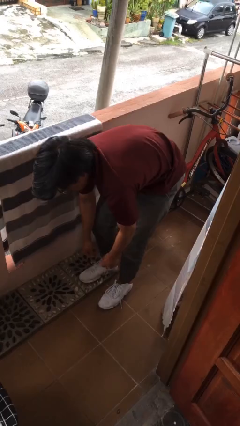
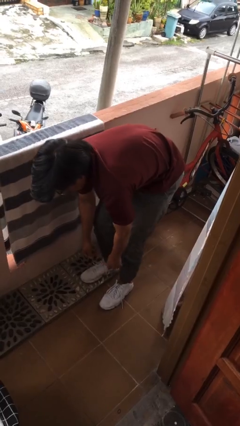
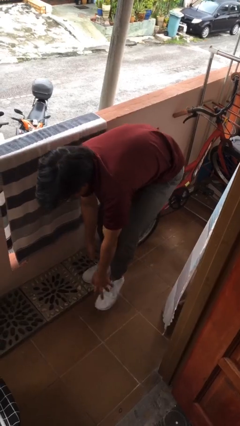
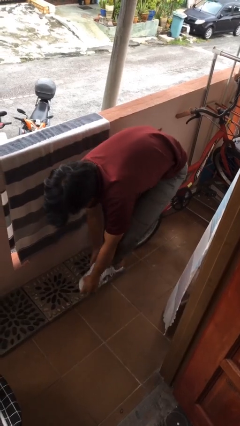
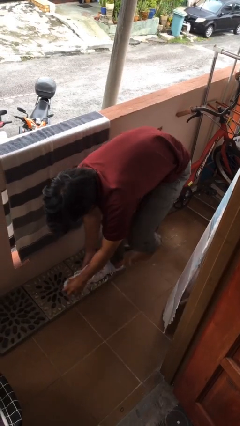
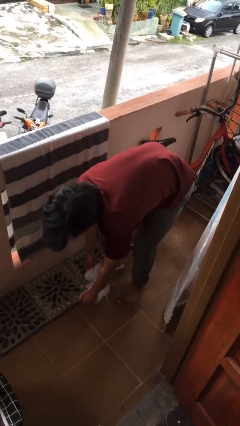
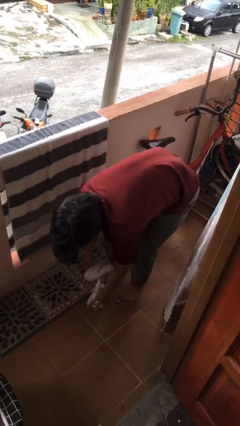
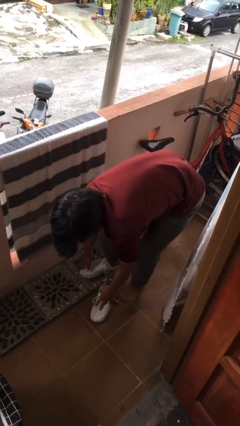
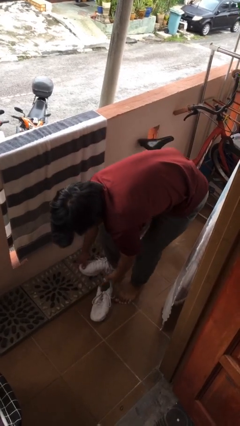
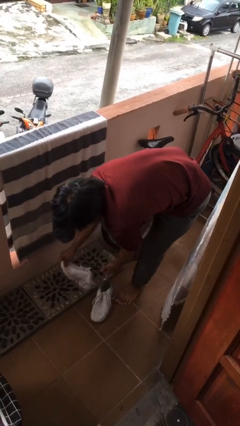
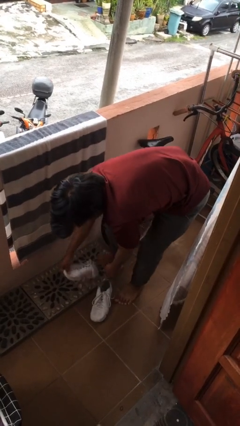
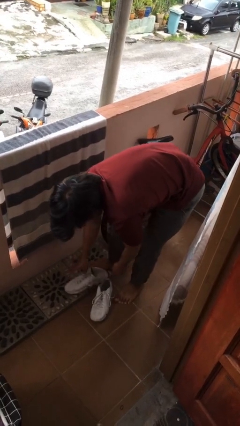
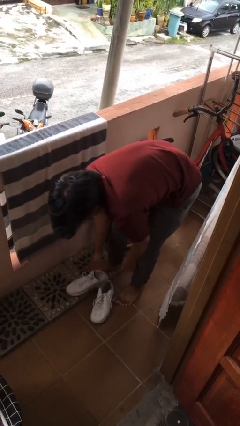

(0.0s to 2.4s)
person takes off shoes

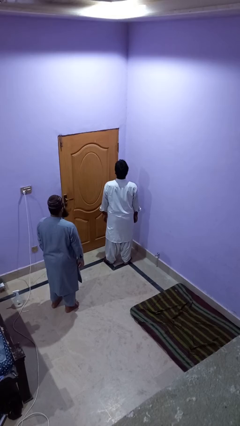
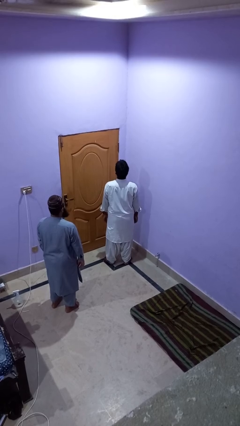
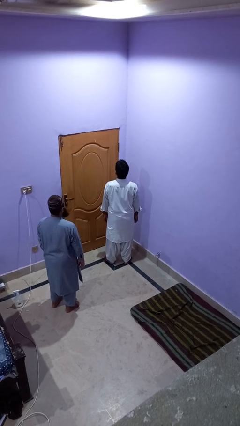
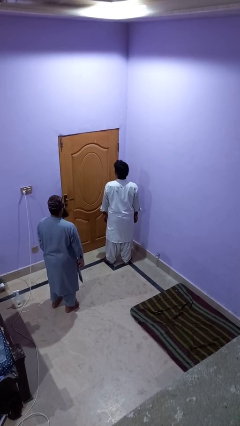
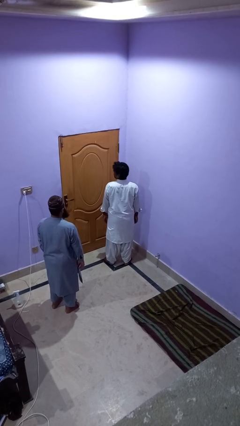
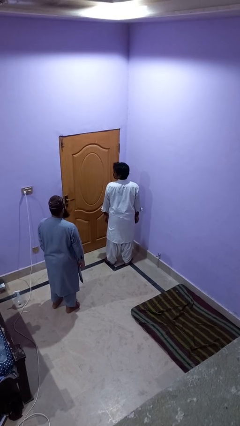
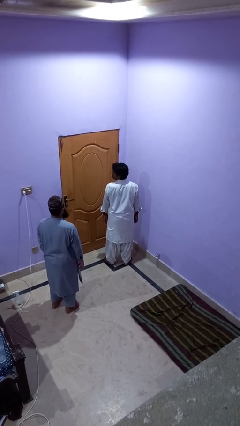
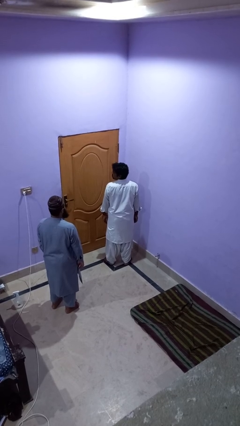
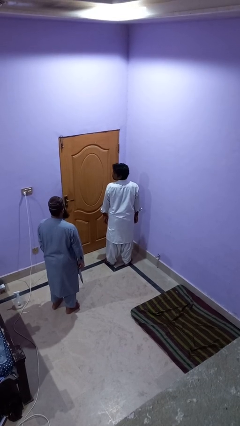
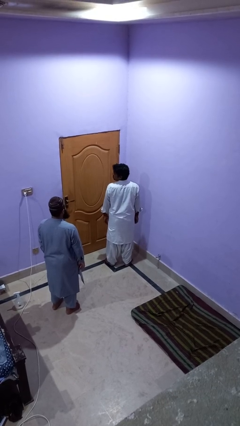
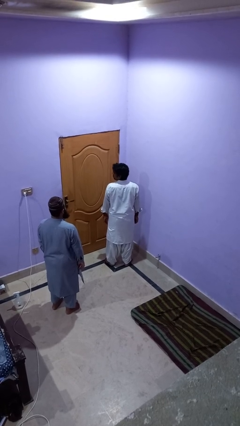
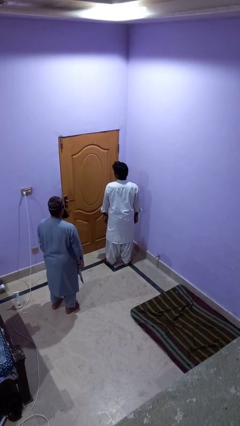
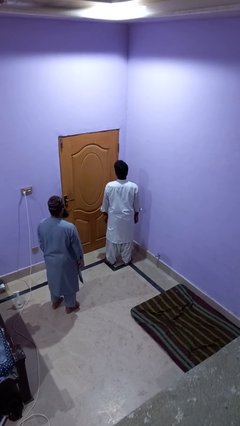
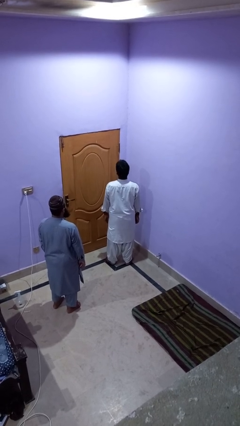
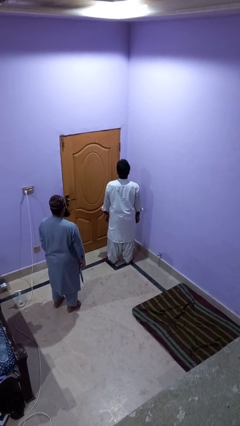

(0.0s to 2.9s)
person looks over shoulder

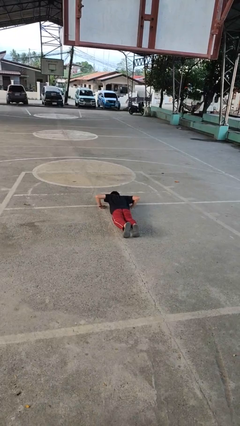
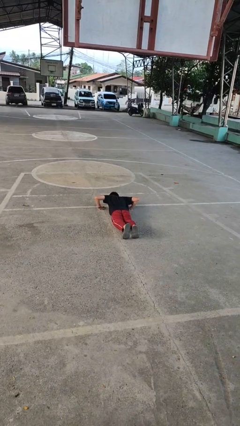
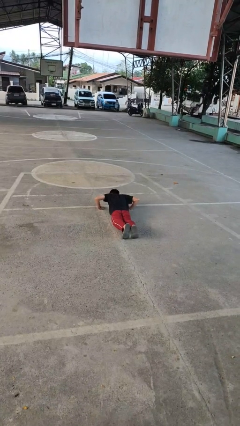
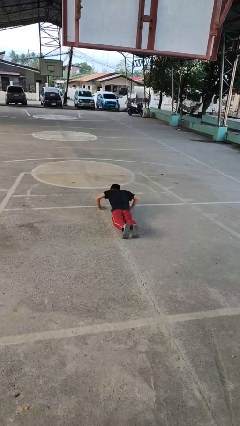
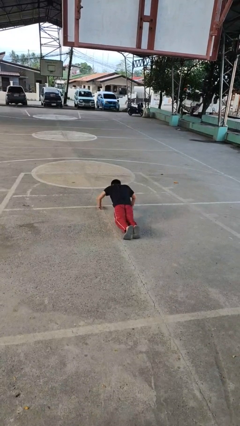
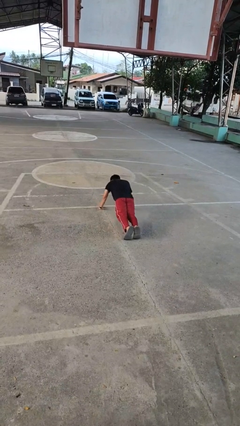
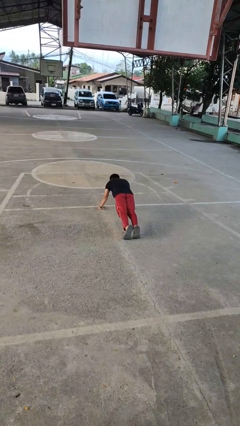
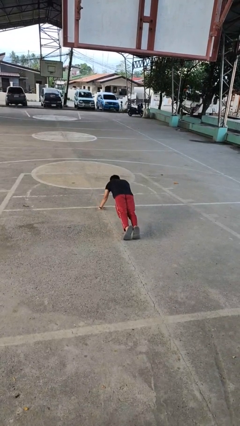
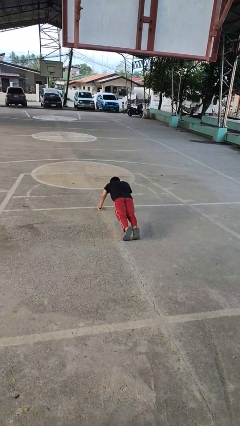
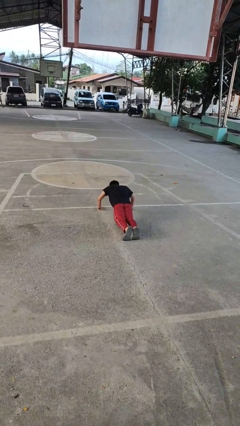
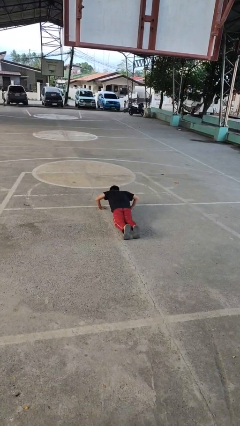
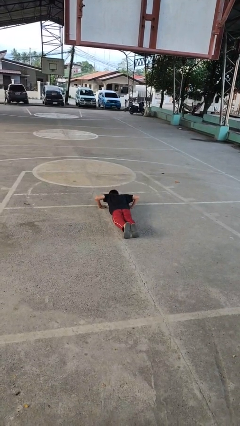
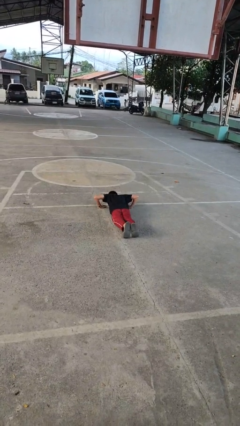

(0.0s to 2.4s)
person exercises with pushup

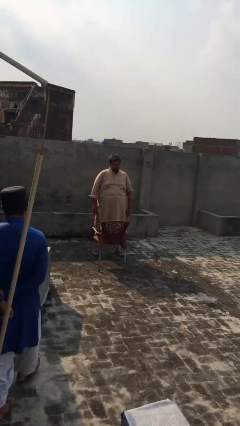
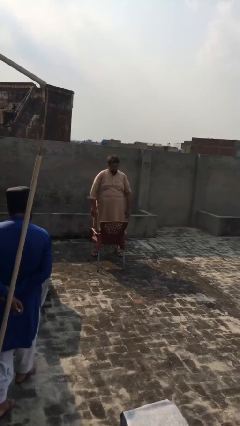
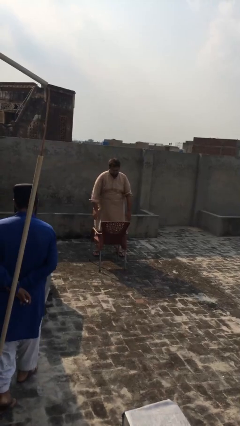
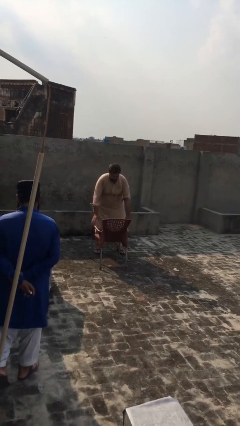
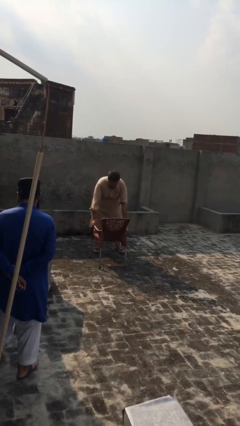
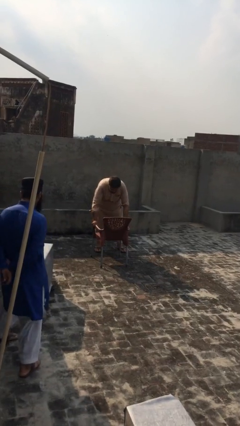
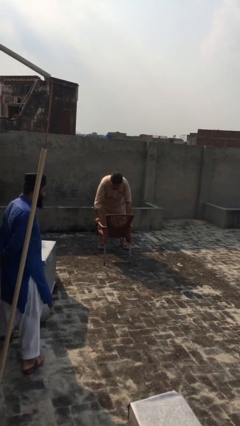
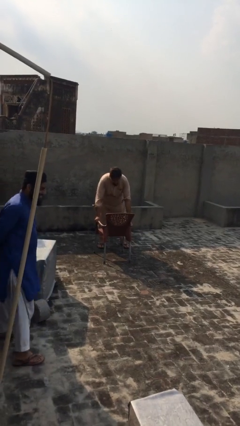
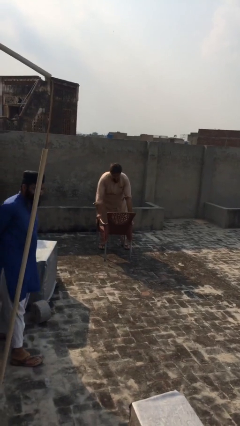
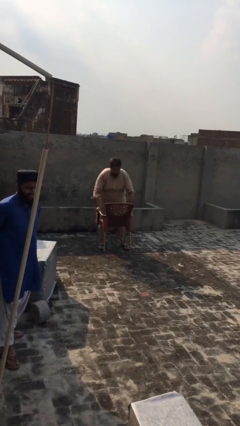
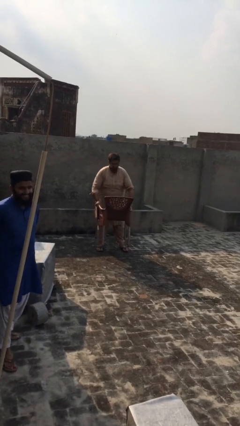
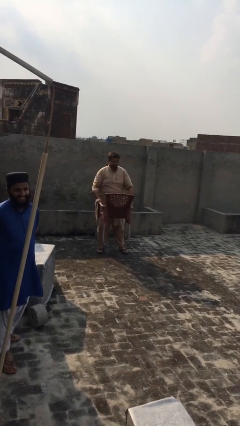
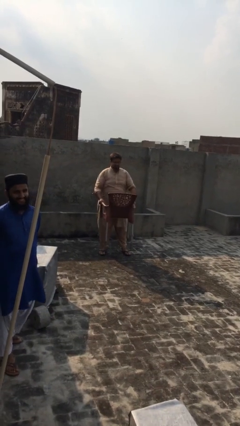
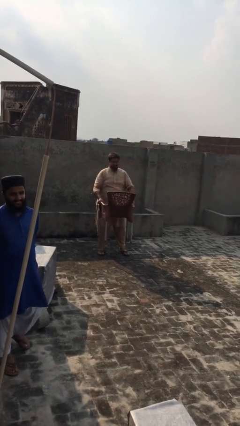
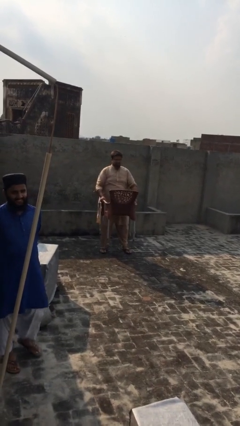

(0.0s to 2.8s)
person picks up object from floor

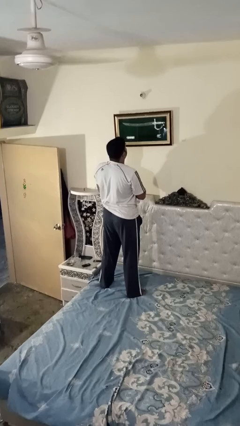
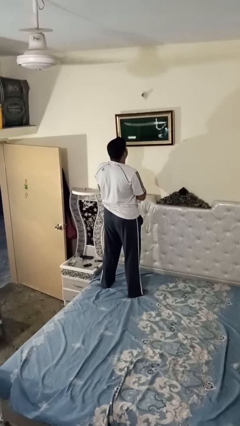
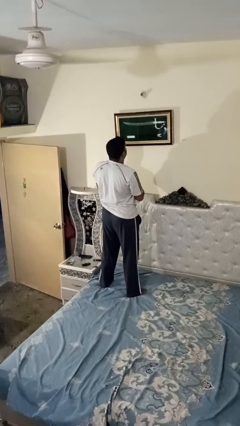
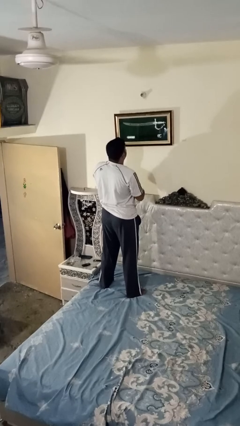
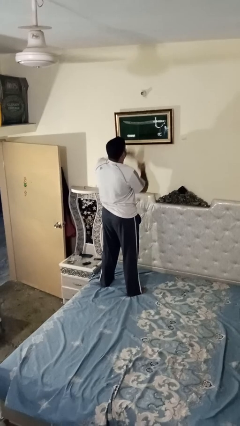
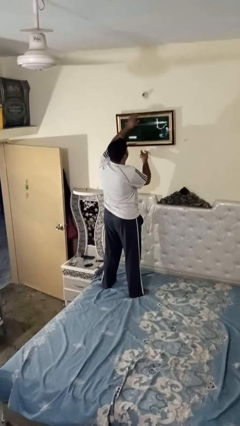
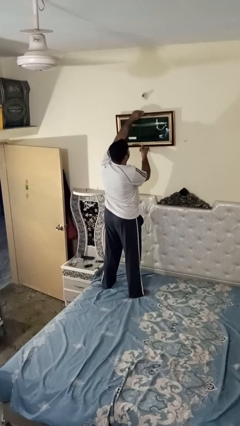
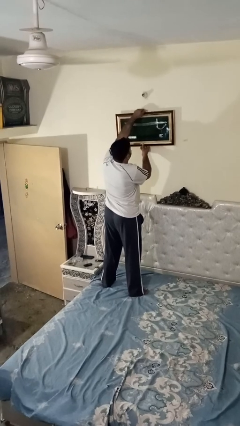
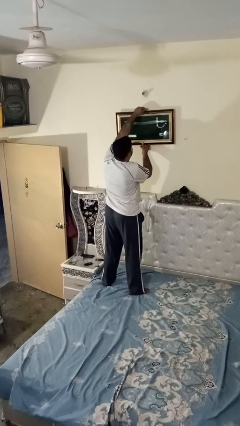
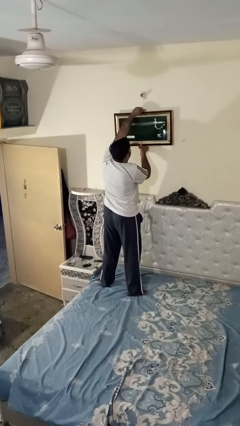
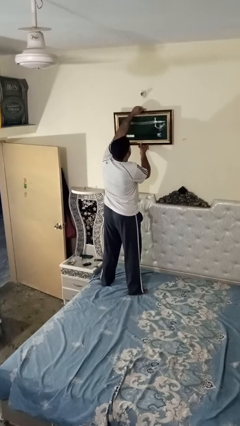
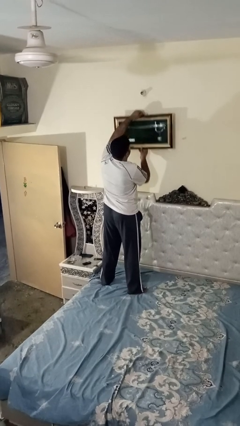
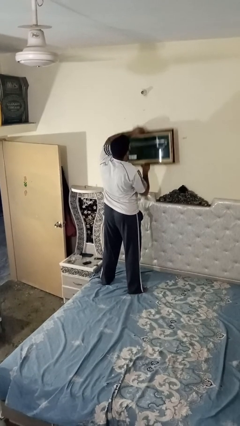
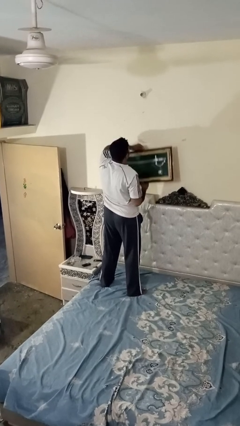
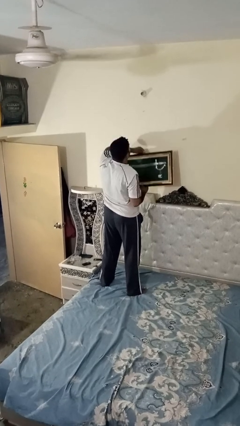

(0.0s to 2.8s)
person takes down picture frame

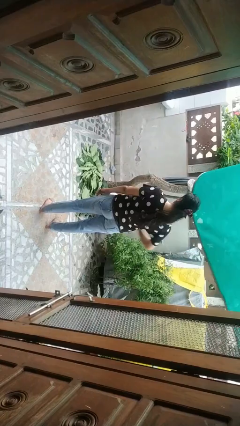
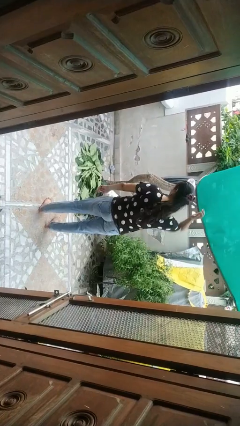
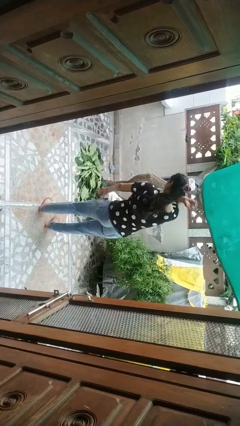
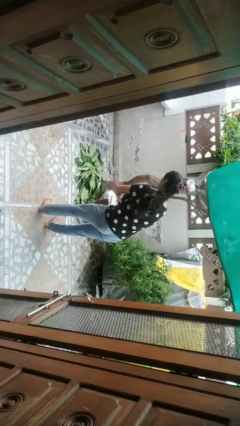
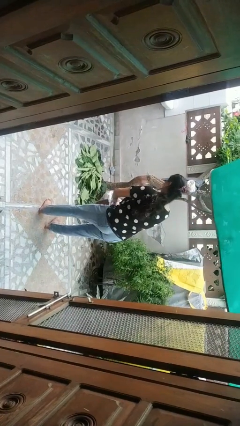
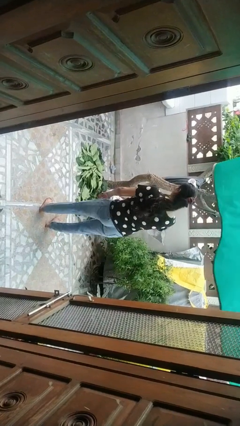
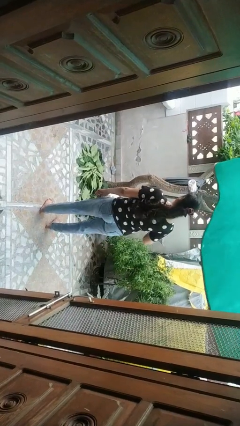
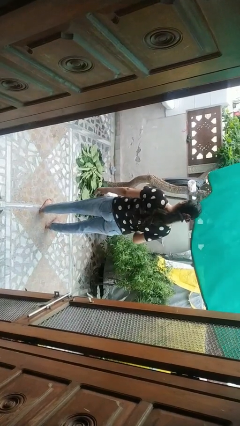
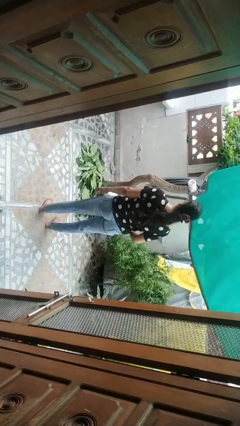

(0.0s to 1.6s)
person karate chop

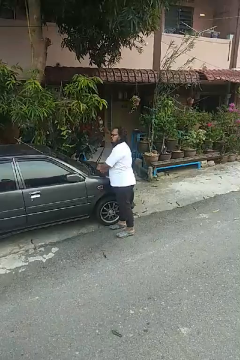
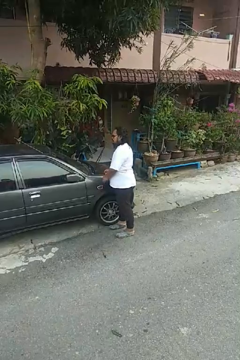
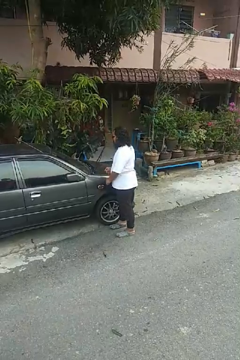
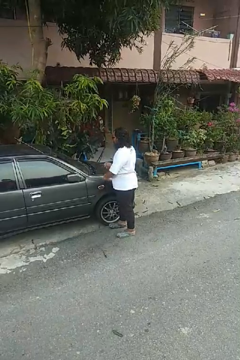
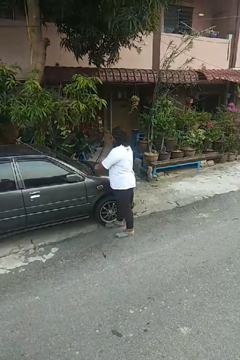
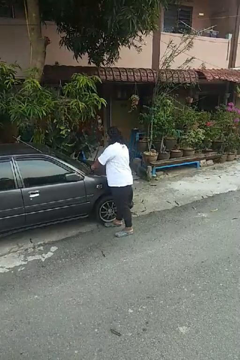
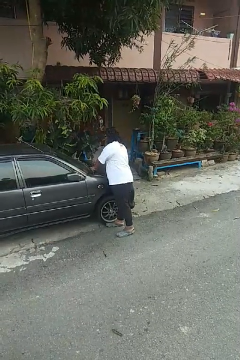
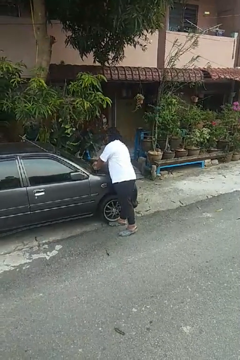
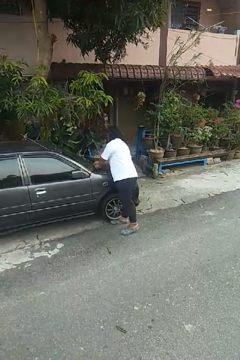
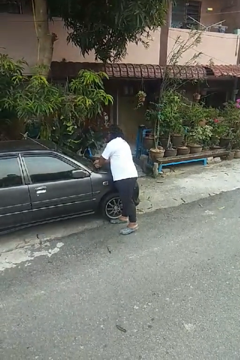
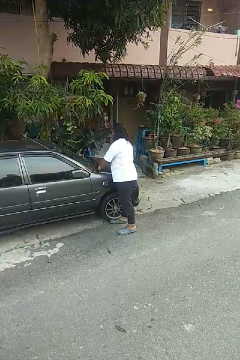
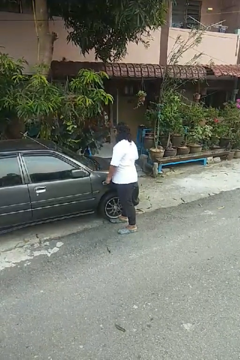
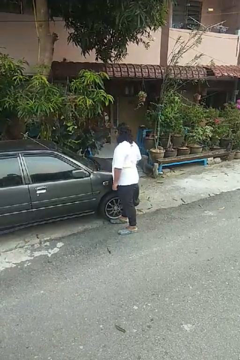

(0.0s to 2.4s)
person flips down car wipers

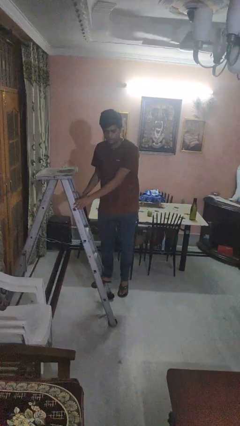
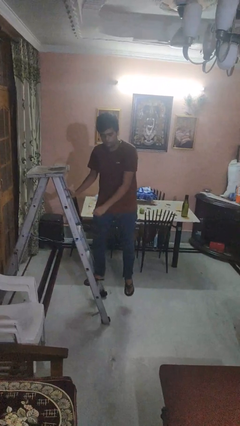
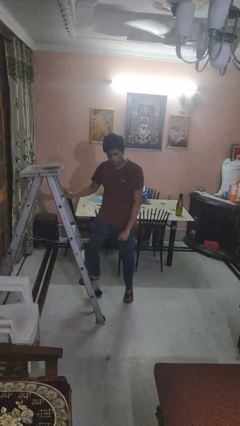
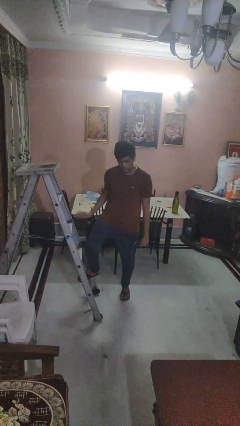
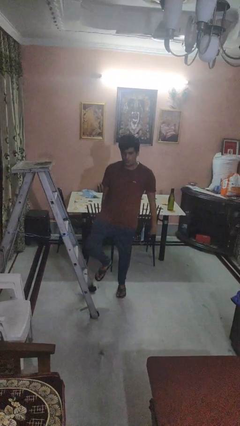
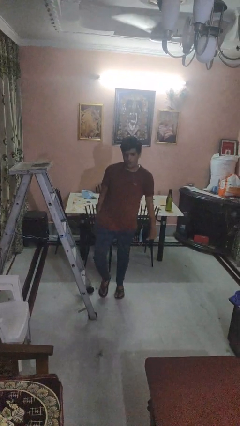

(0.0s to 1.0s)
person climbs down ladder
